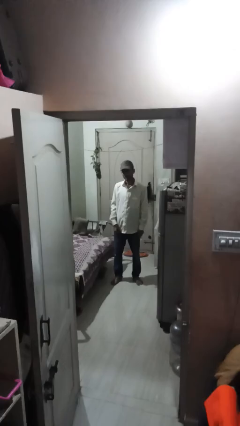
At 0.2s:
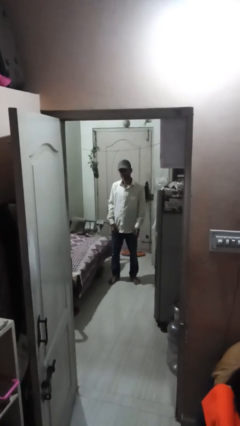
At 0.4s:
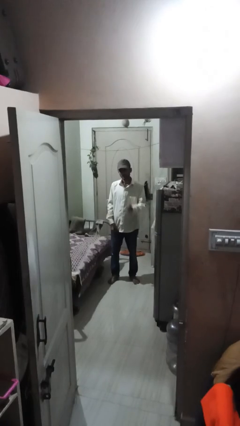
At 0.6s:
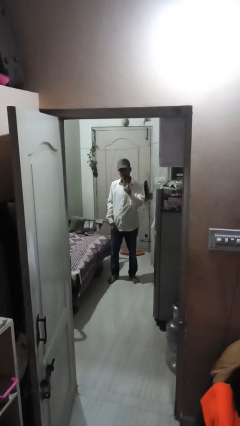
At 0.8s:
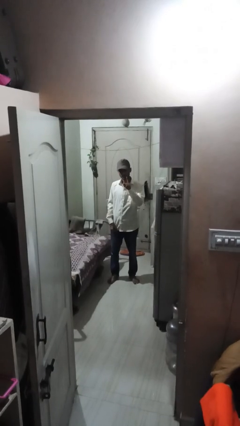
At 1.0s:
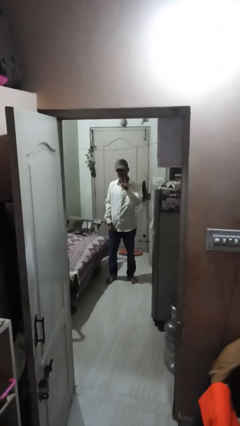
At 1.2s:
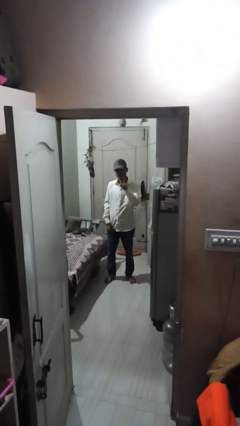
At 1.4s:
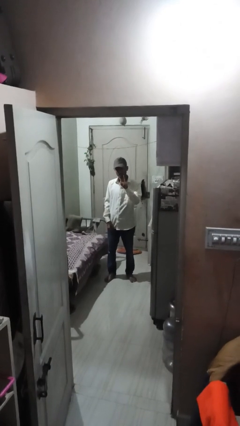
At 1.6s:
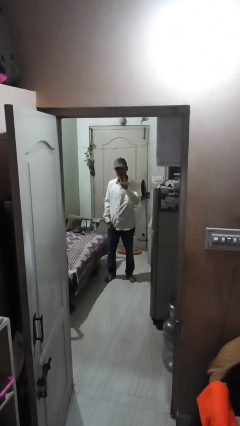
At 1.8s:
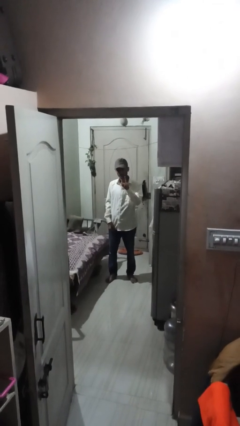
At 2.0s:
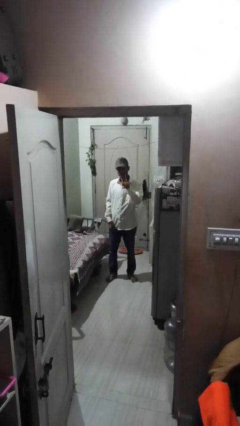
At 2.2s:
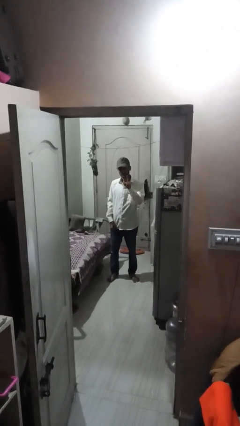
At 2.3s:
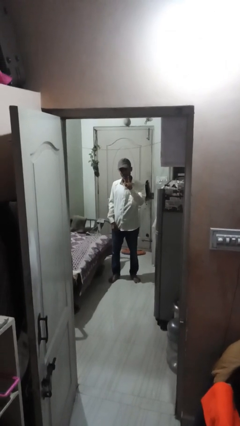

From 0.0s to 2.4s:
person gestures number one

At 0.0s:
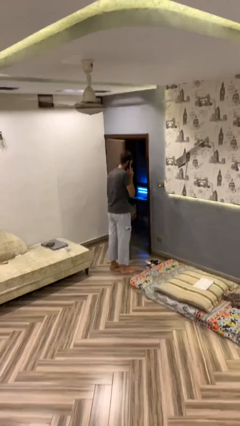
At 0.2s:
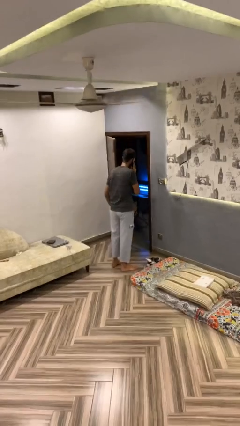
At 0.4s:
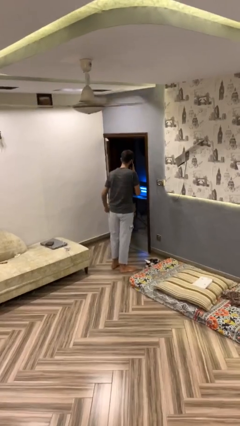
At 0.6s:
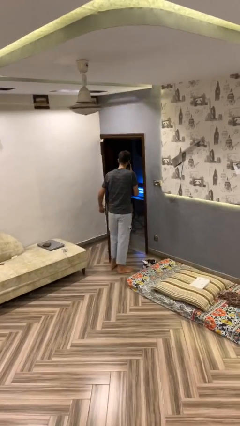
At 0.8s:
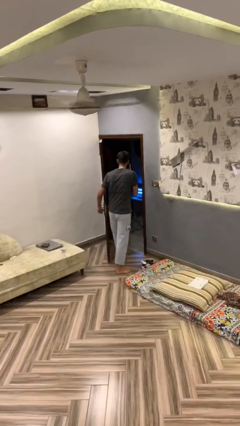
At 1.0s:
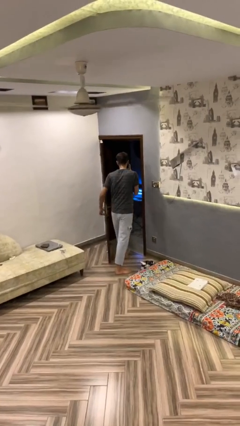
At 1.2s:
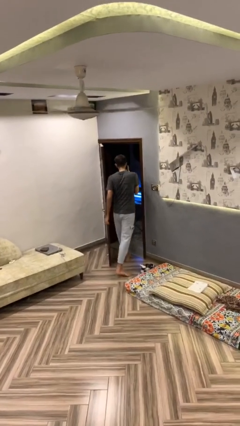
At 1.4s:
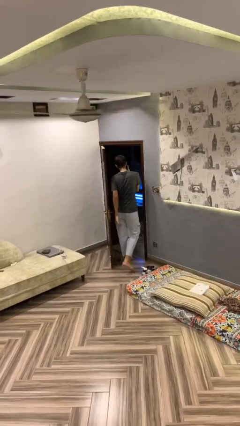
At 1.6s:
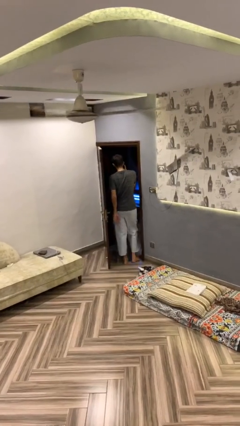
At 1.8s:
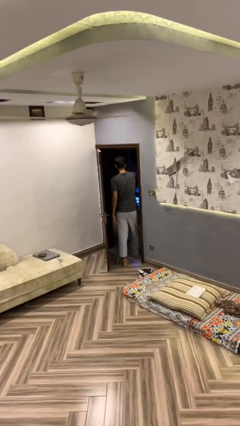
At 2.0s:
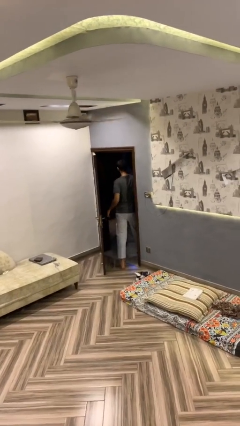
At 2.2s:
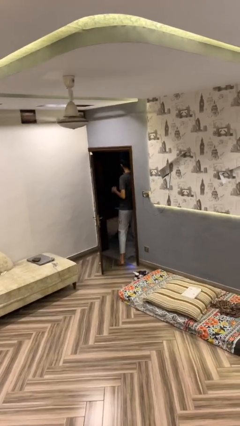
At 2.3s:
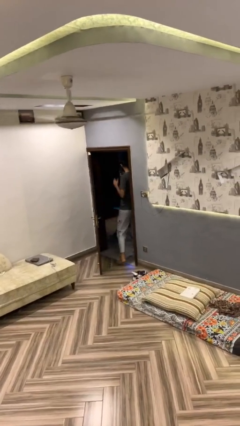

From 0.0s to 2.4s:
person exits scene through structure

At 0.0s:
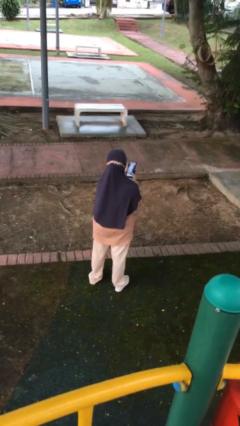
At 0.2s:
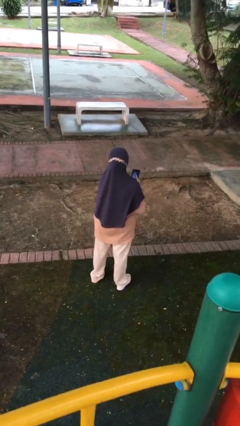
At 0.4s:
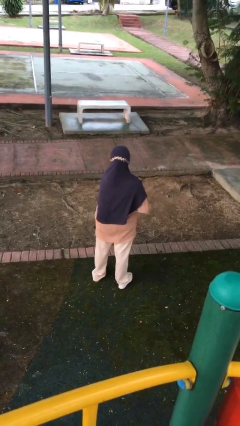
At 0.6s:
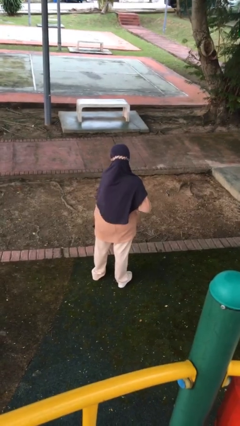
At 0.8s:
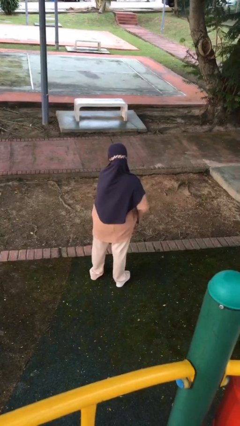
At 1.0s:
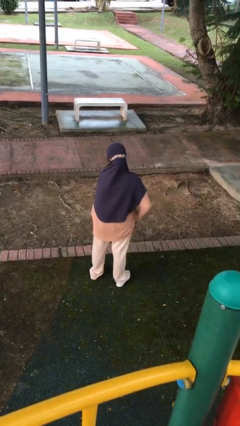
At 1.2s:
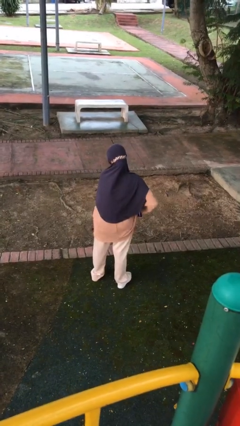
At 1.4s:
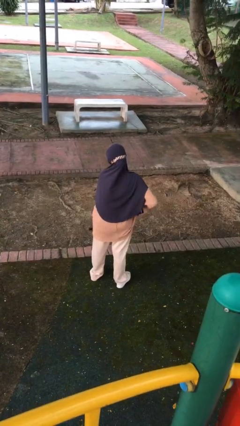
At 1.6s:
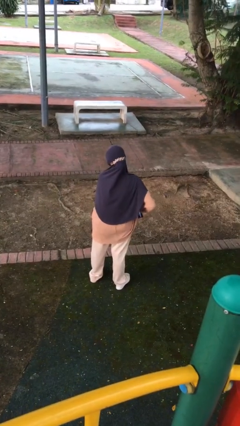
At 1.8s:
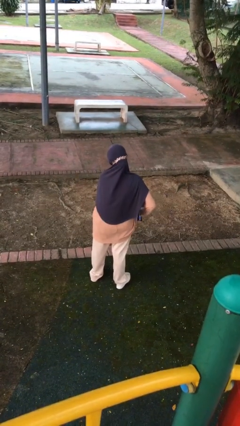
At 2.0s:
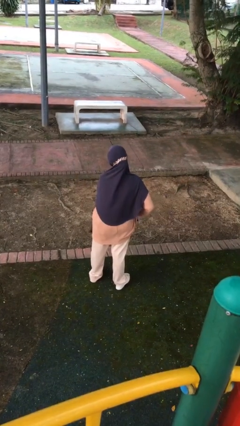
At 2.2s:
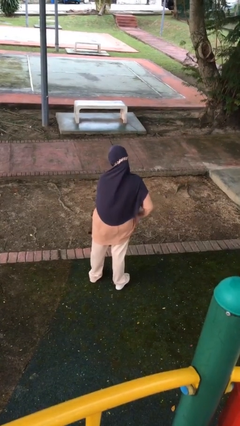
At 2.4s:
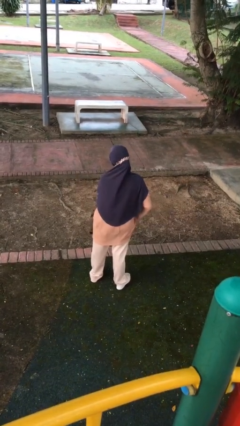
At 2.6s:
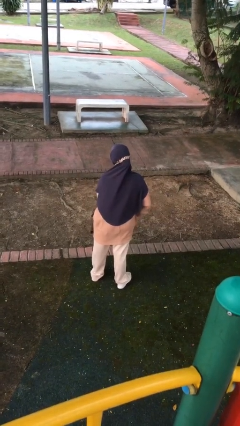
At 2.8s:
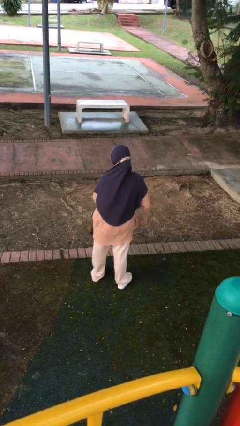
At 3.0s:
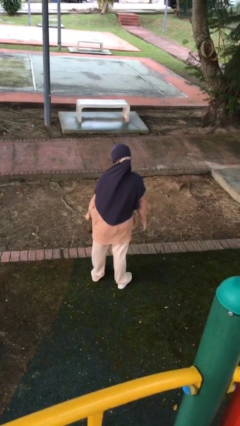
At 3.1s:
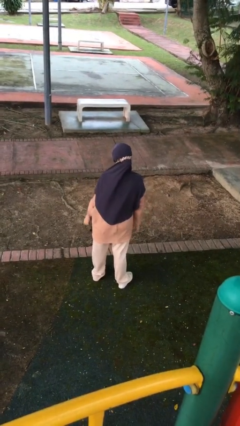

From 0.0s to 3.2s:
person puts phone into pocket

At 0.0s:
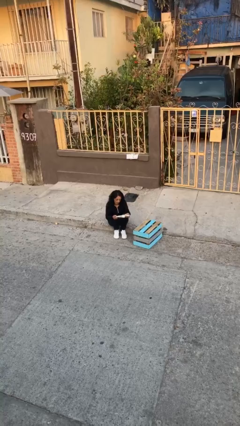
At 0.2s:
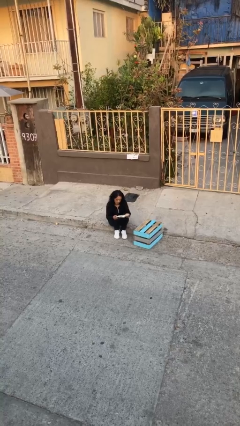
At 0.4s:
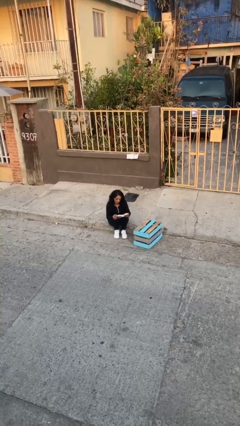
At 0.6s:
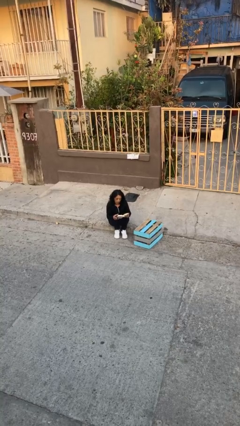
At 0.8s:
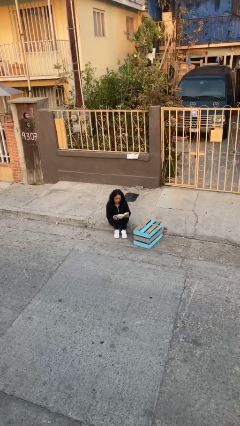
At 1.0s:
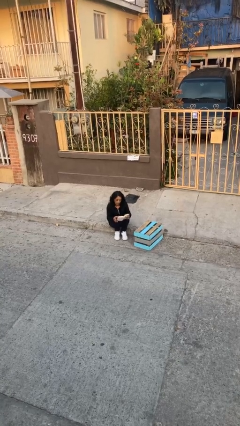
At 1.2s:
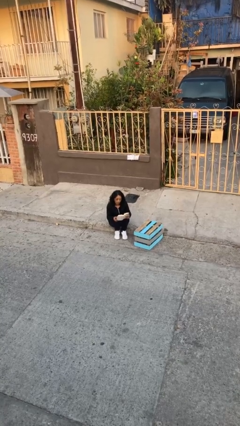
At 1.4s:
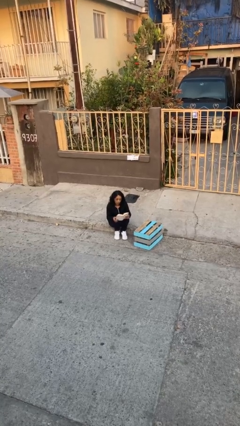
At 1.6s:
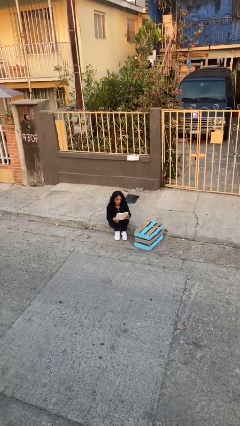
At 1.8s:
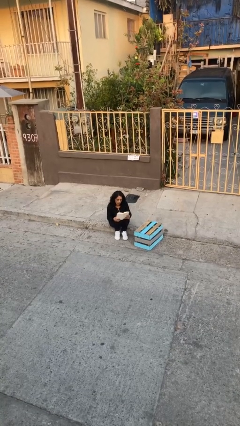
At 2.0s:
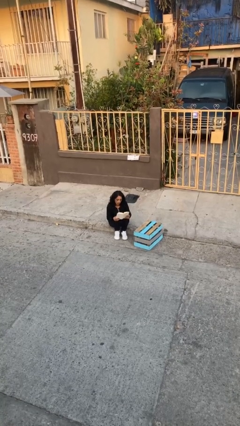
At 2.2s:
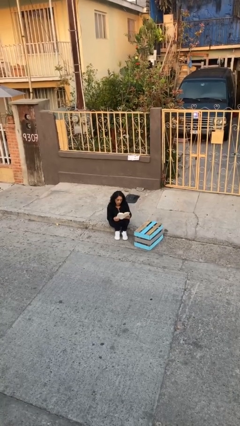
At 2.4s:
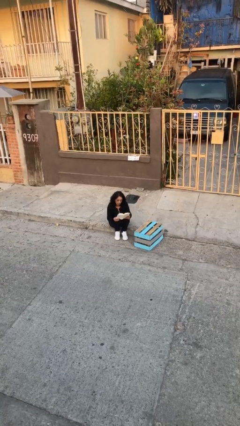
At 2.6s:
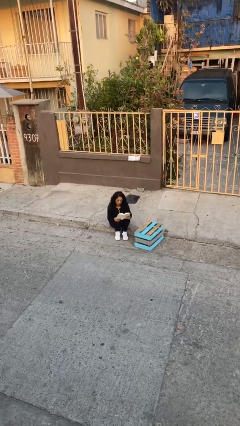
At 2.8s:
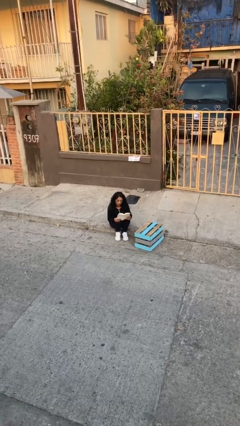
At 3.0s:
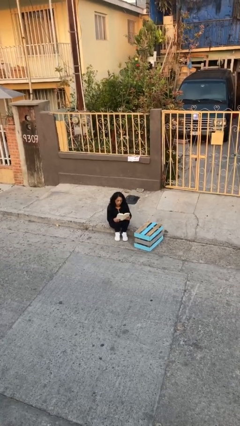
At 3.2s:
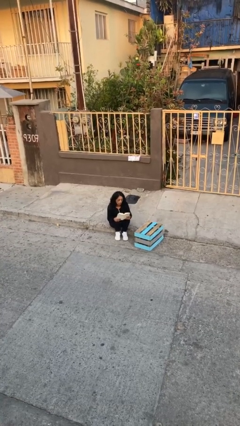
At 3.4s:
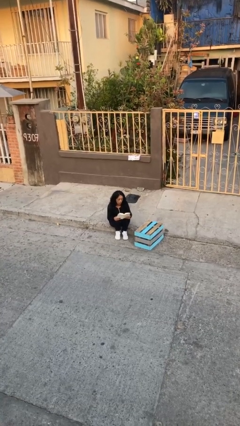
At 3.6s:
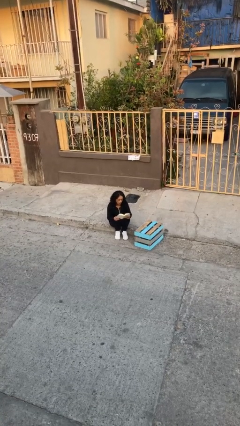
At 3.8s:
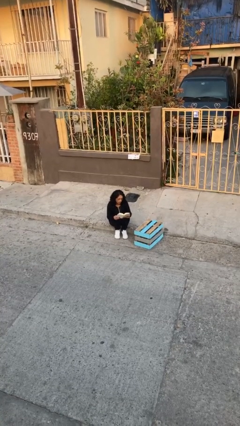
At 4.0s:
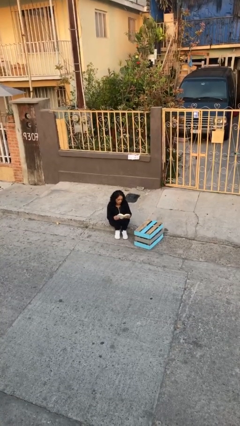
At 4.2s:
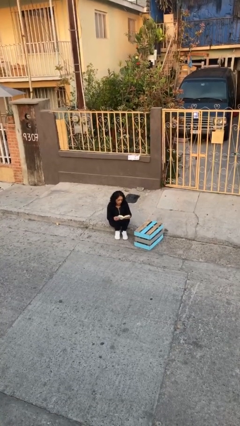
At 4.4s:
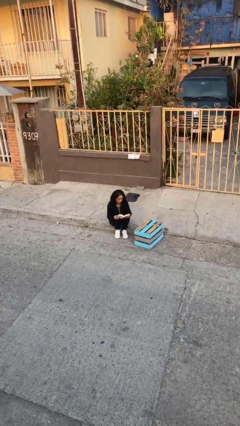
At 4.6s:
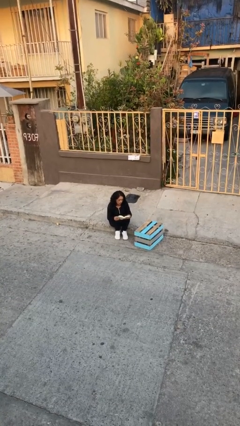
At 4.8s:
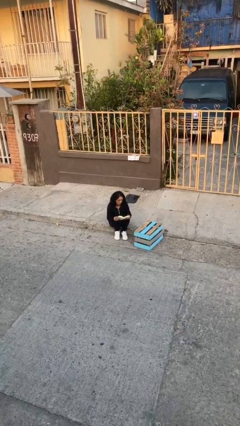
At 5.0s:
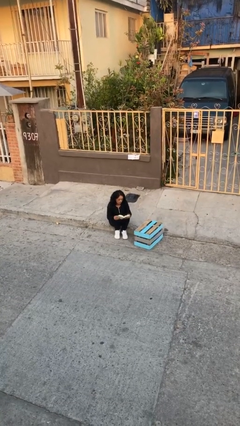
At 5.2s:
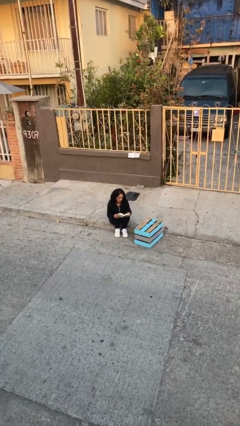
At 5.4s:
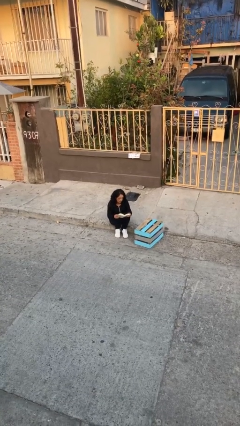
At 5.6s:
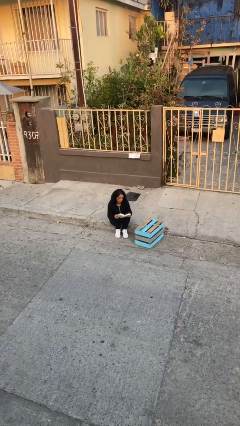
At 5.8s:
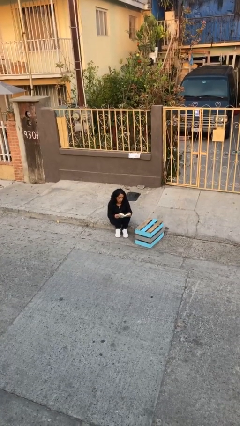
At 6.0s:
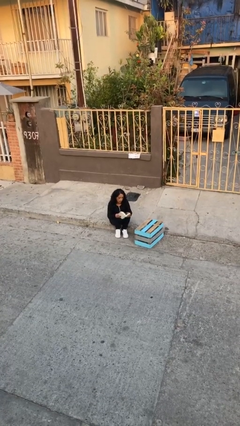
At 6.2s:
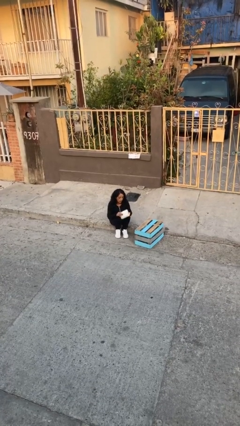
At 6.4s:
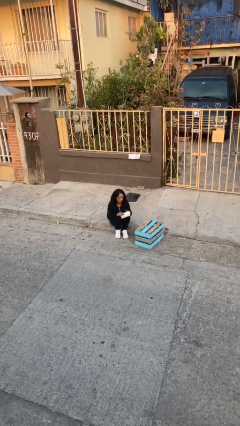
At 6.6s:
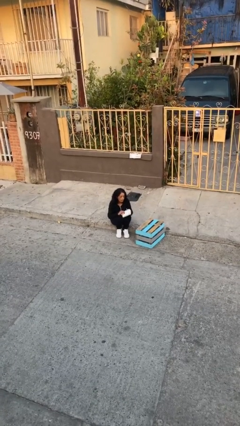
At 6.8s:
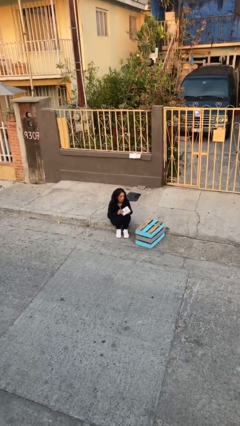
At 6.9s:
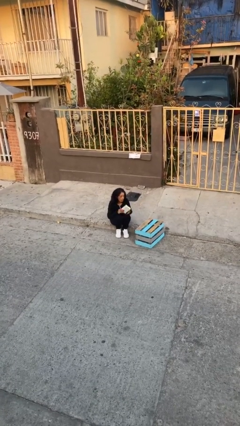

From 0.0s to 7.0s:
person reads document

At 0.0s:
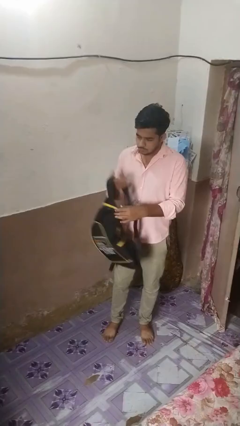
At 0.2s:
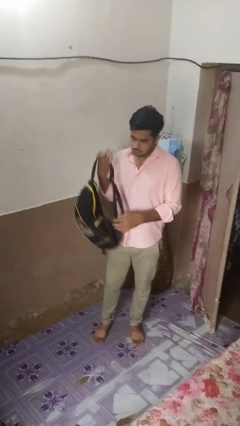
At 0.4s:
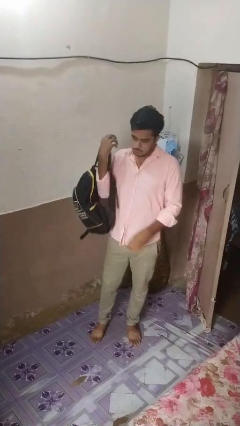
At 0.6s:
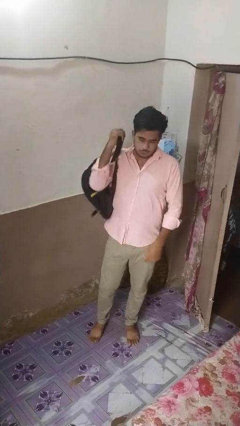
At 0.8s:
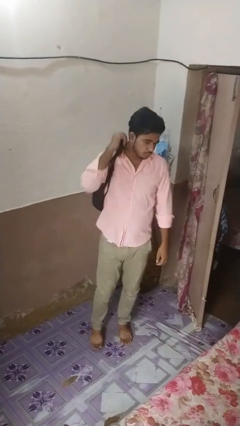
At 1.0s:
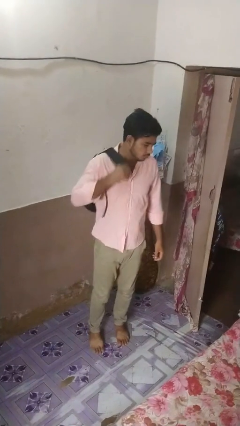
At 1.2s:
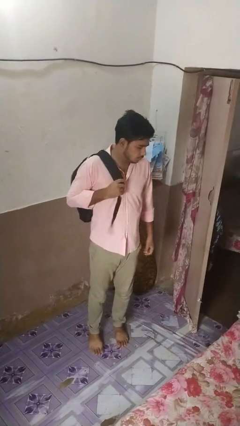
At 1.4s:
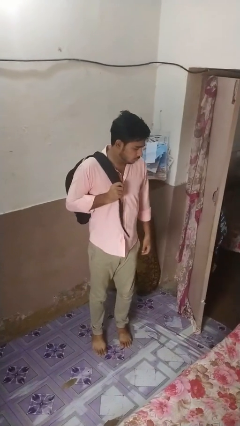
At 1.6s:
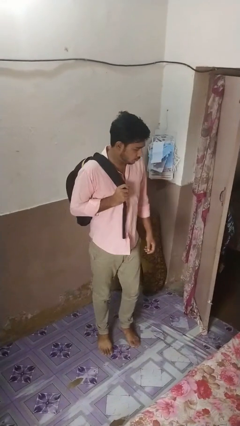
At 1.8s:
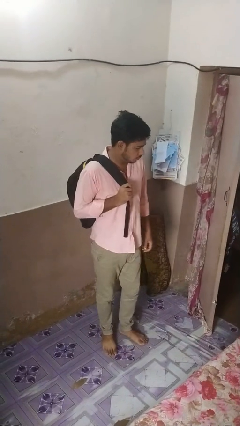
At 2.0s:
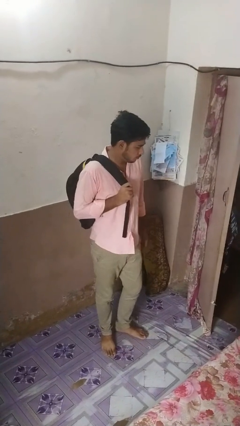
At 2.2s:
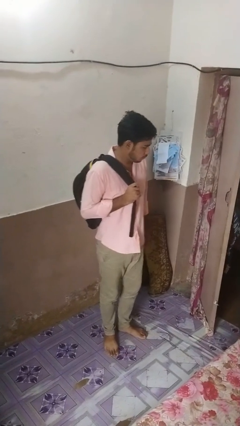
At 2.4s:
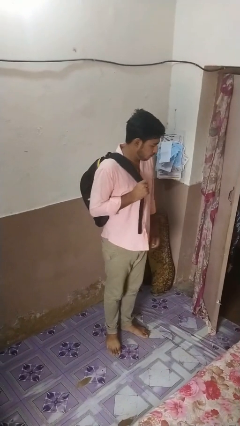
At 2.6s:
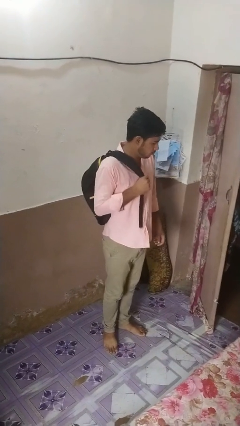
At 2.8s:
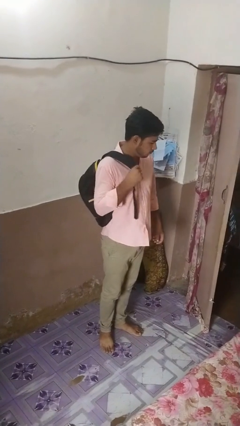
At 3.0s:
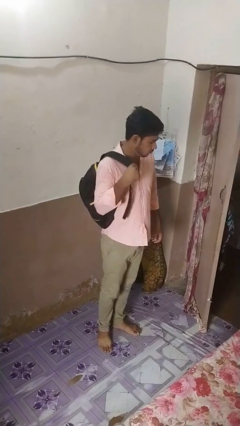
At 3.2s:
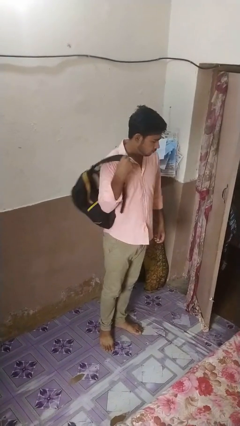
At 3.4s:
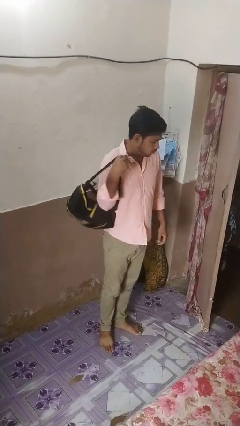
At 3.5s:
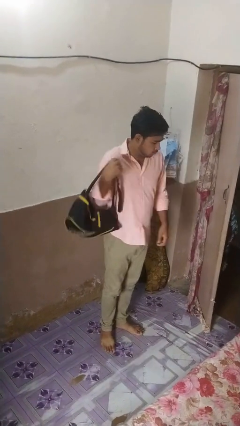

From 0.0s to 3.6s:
person puts on backpack
